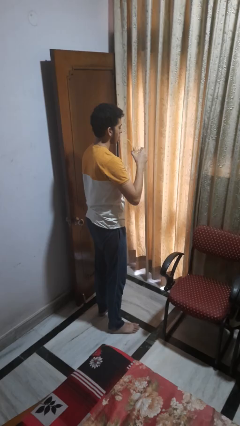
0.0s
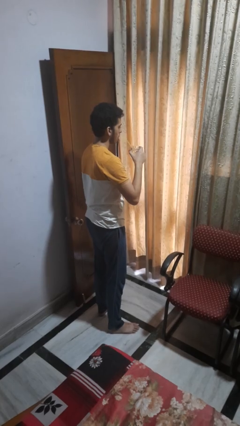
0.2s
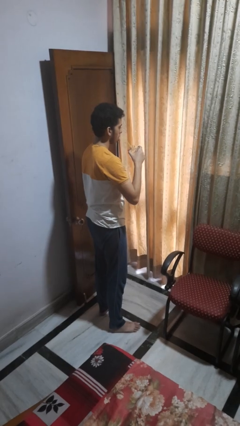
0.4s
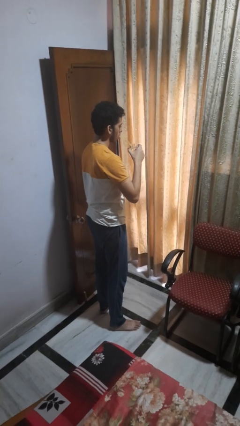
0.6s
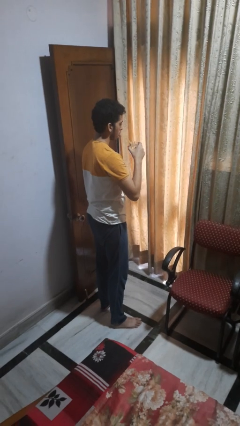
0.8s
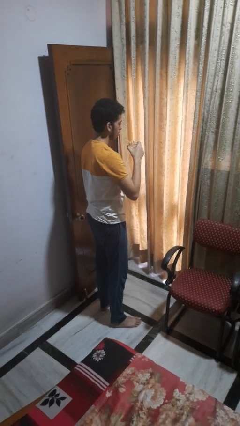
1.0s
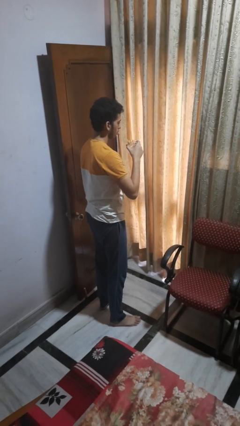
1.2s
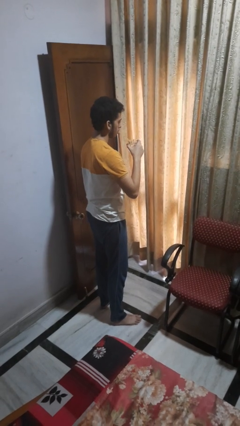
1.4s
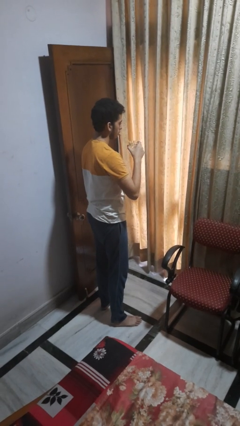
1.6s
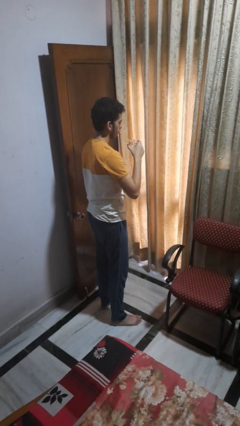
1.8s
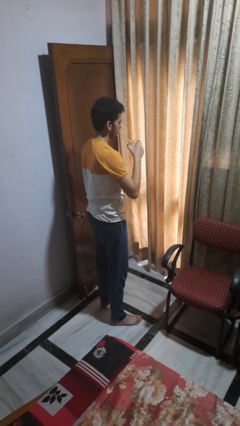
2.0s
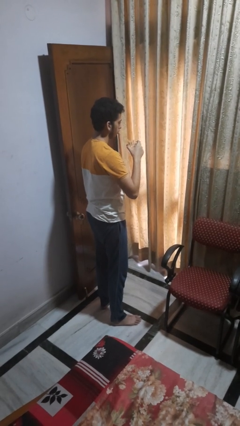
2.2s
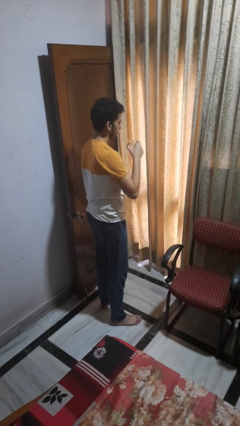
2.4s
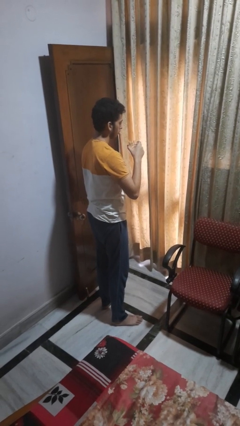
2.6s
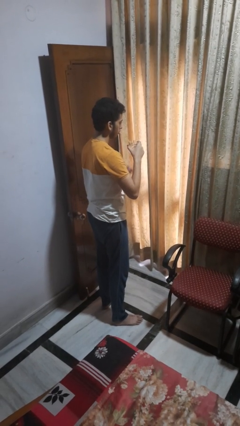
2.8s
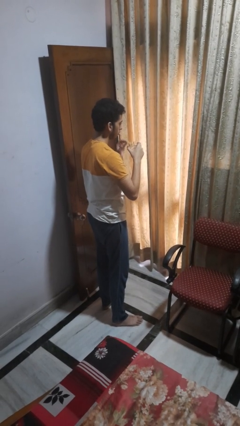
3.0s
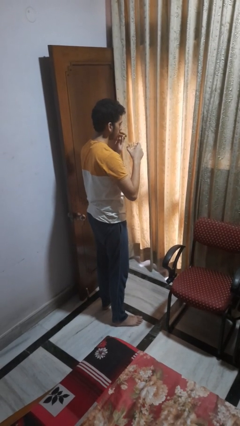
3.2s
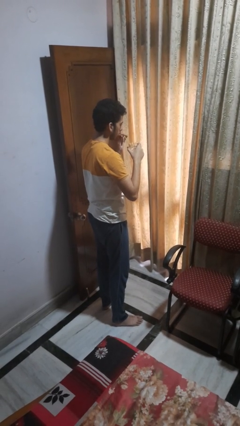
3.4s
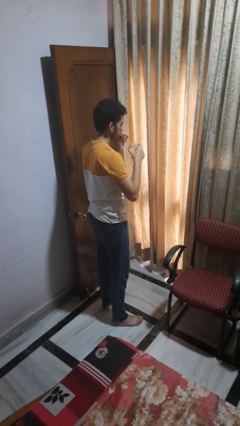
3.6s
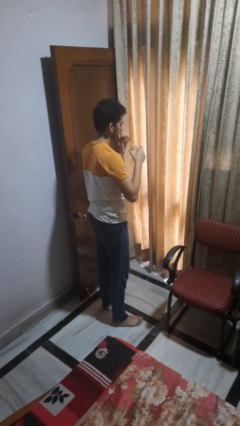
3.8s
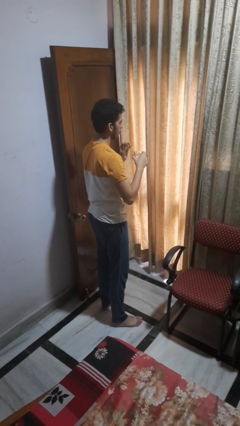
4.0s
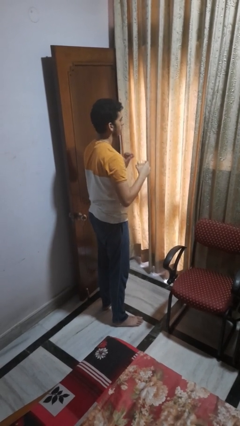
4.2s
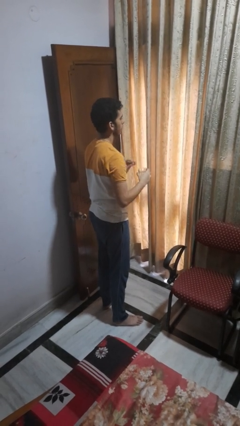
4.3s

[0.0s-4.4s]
person drinks from straw

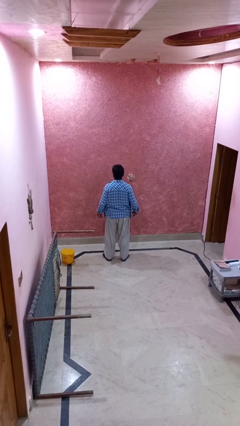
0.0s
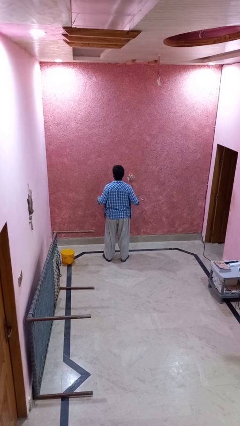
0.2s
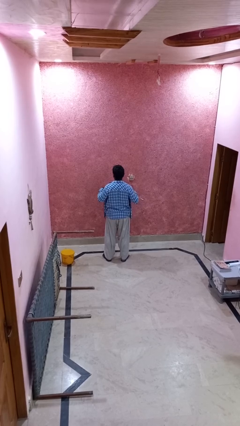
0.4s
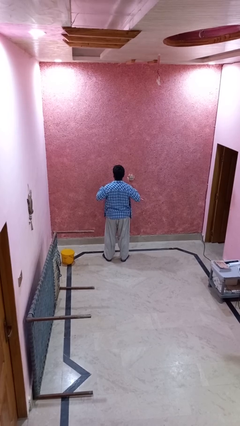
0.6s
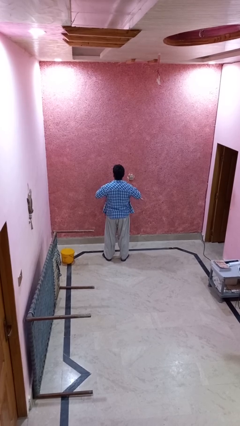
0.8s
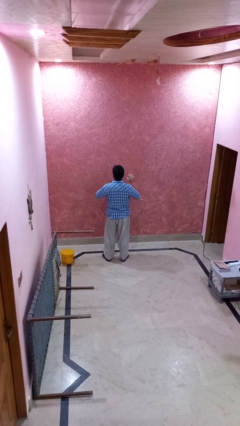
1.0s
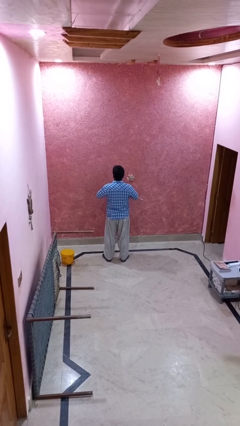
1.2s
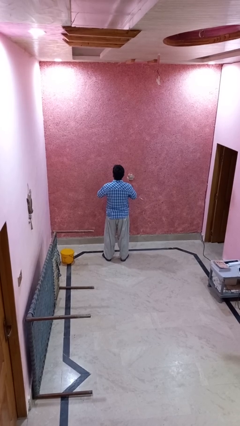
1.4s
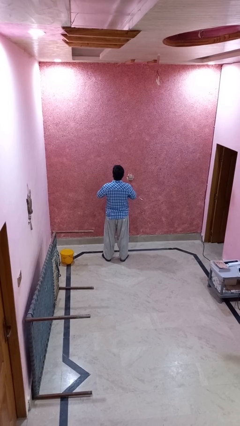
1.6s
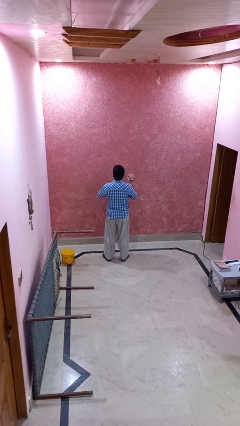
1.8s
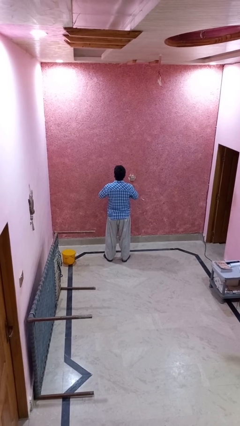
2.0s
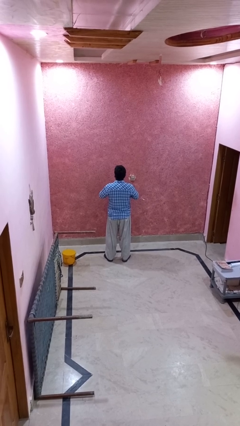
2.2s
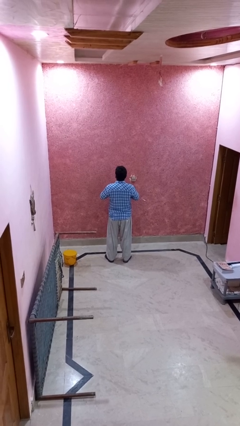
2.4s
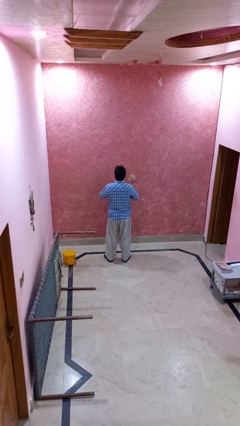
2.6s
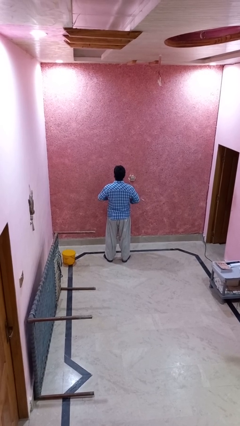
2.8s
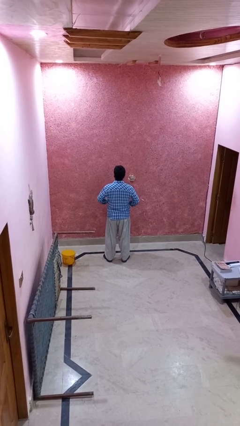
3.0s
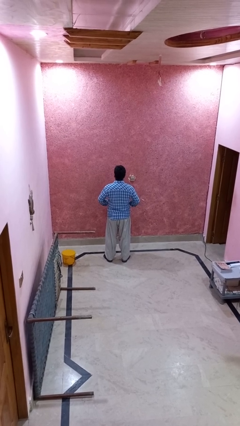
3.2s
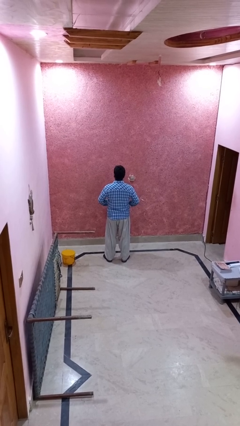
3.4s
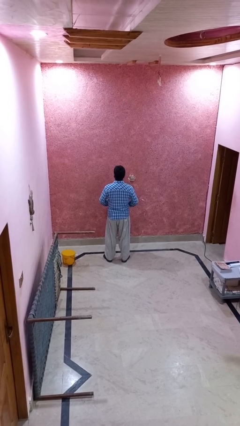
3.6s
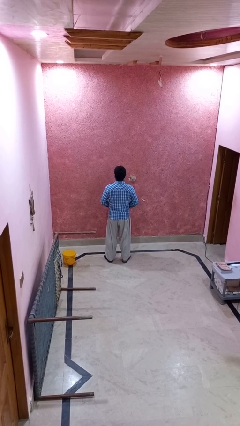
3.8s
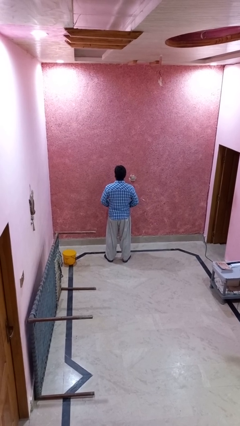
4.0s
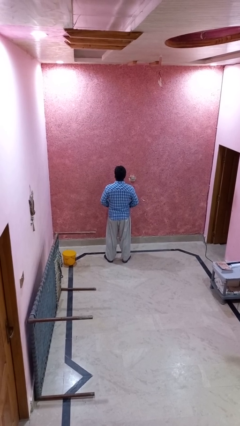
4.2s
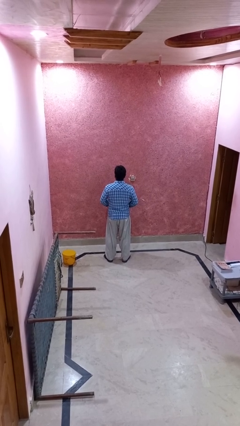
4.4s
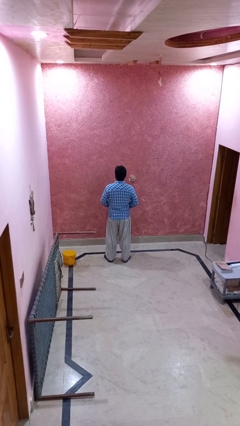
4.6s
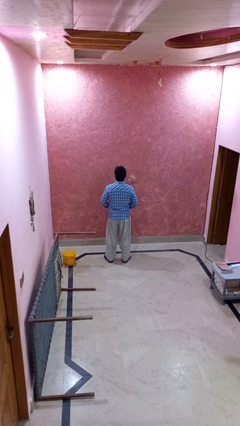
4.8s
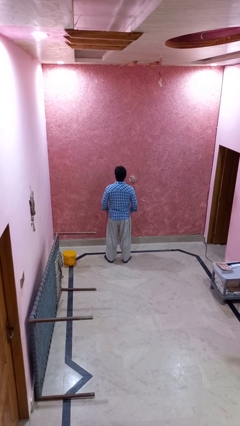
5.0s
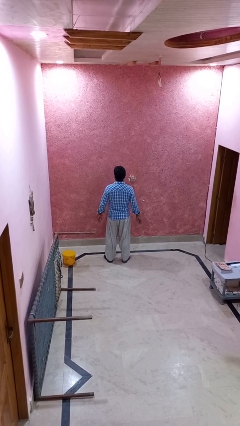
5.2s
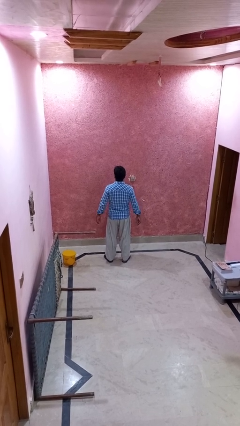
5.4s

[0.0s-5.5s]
person buttons shirt

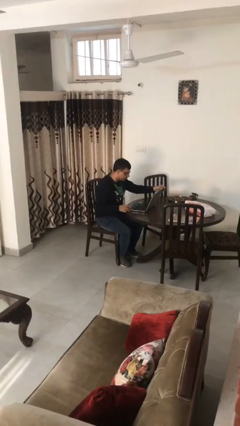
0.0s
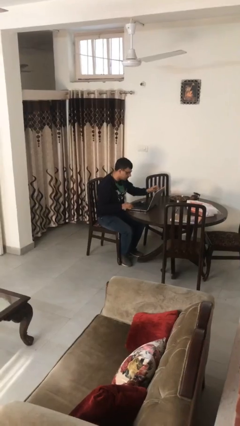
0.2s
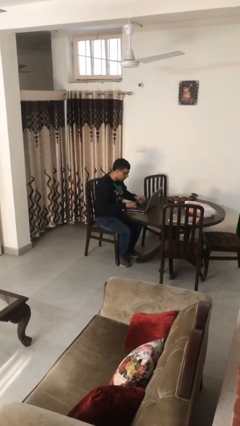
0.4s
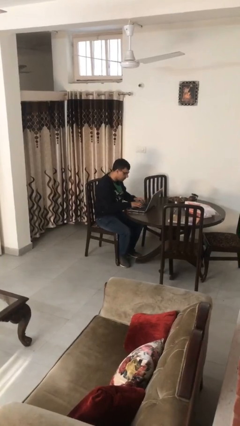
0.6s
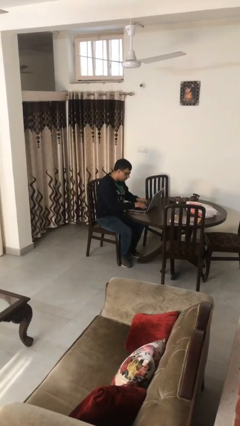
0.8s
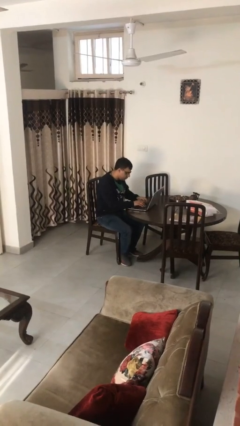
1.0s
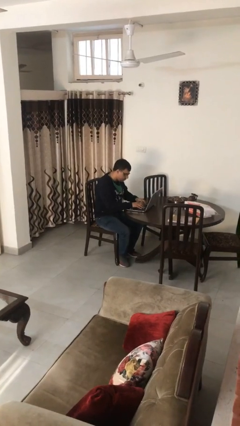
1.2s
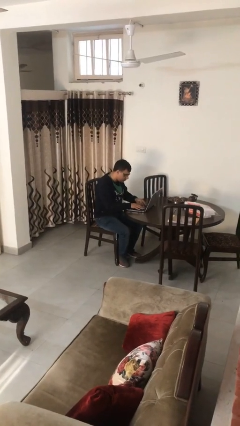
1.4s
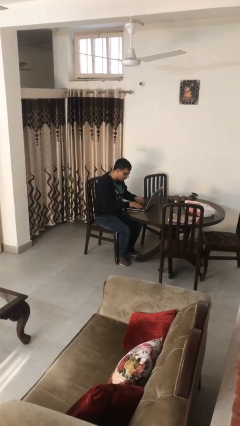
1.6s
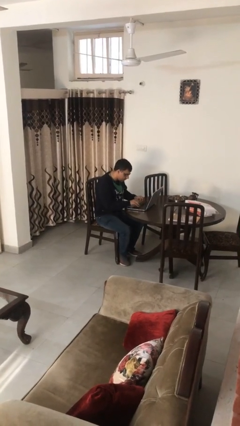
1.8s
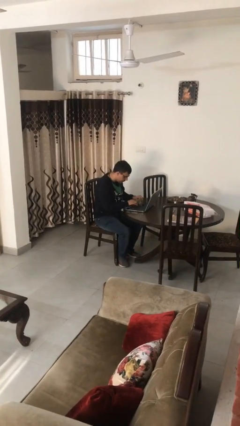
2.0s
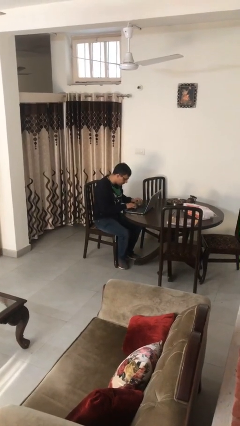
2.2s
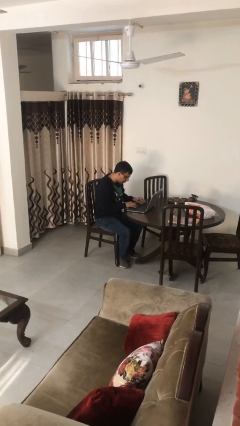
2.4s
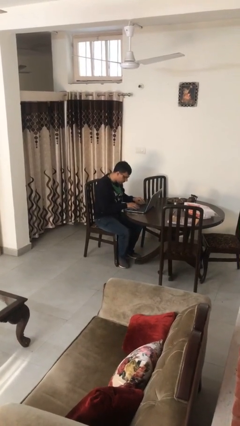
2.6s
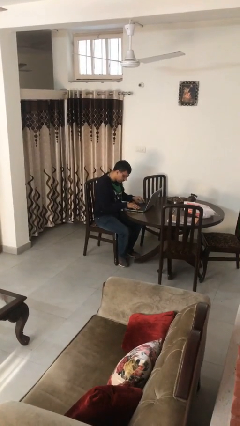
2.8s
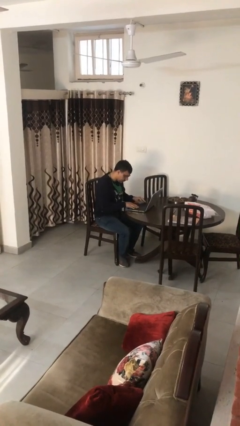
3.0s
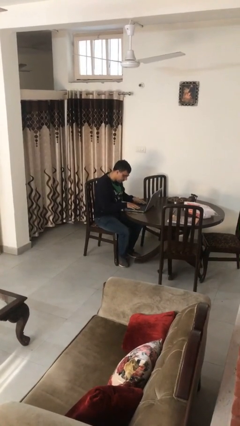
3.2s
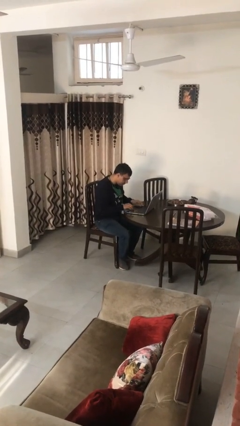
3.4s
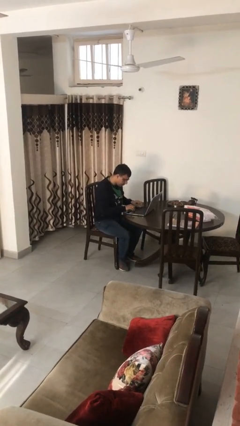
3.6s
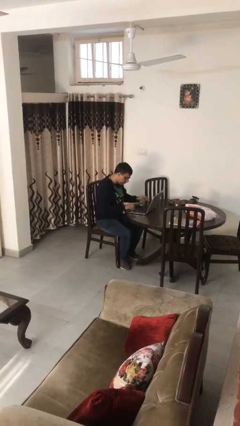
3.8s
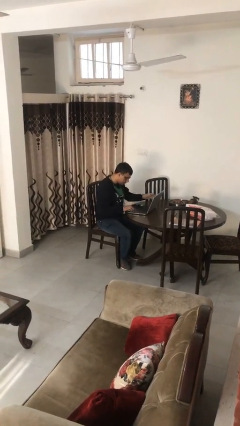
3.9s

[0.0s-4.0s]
person interacts with laptop

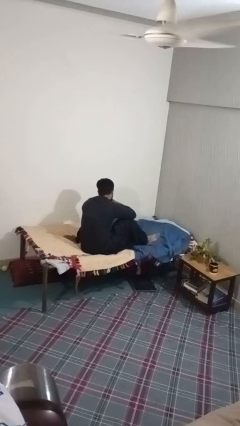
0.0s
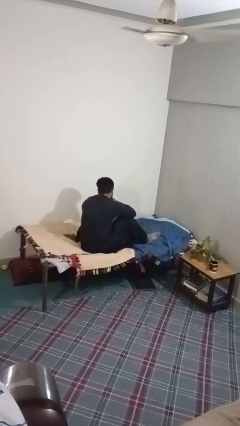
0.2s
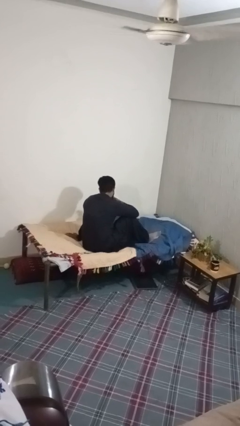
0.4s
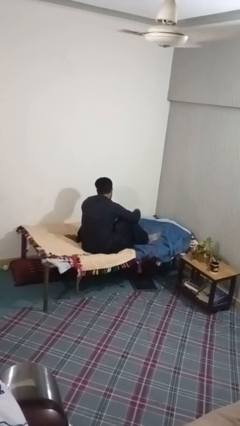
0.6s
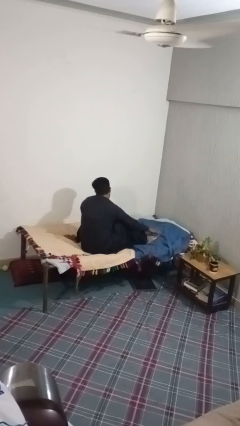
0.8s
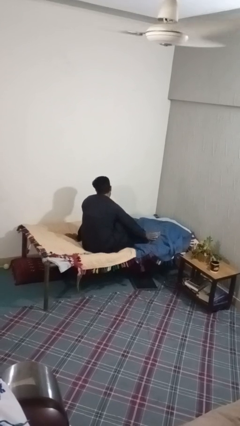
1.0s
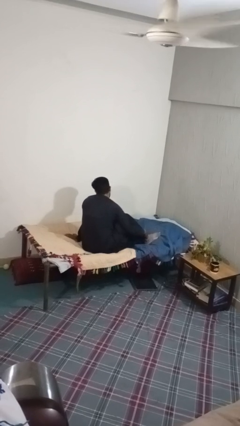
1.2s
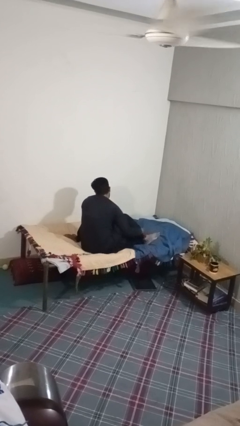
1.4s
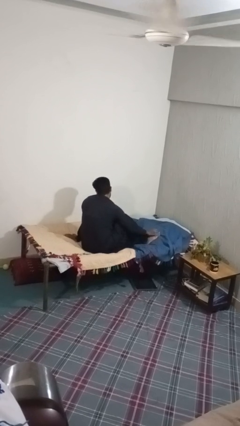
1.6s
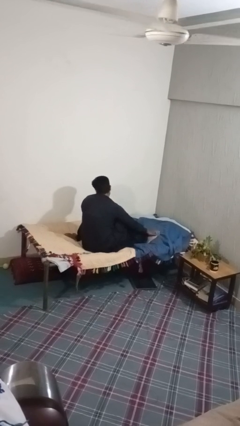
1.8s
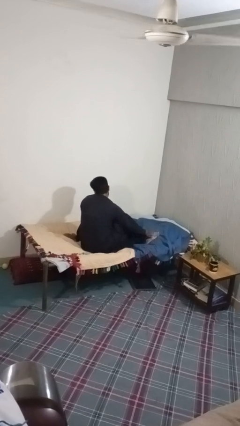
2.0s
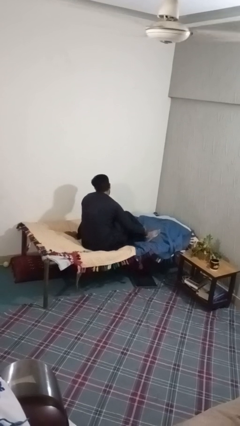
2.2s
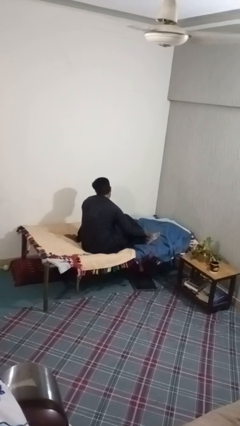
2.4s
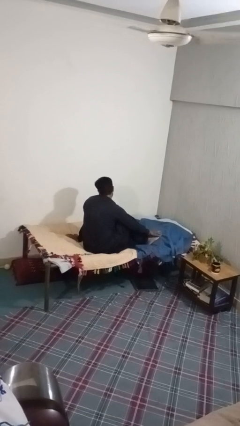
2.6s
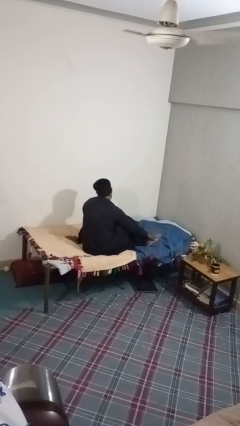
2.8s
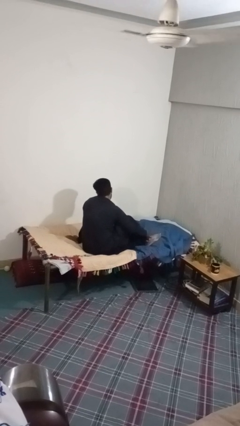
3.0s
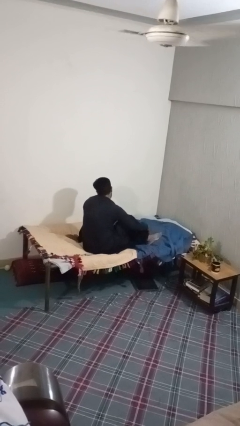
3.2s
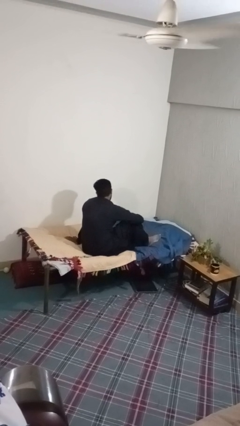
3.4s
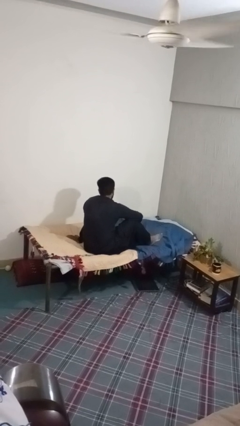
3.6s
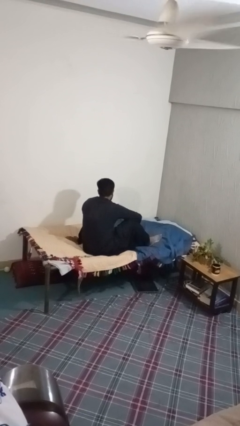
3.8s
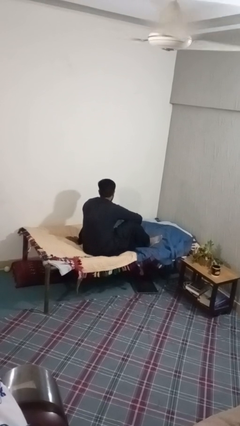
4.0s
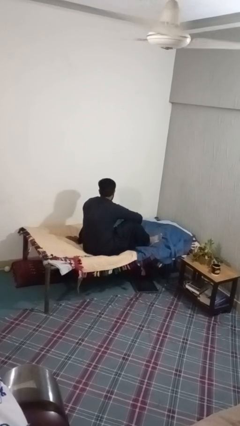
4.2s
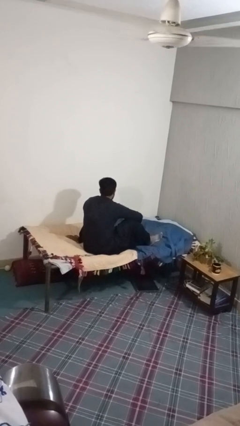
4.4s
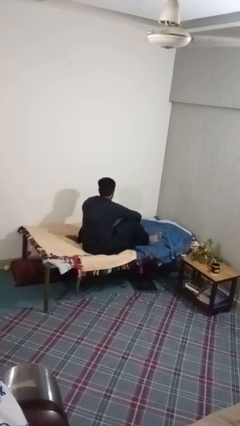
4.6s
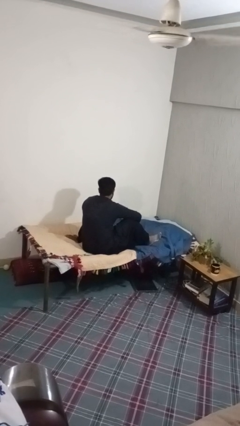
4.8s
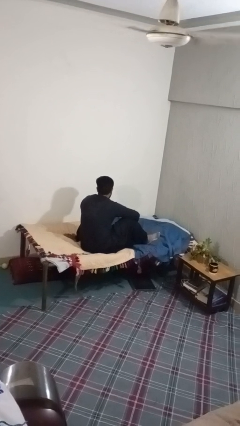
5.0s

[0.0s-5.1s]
person rubs foot
